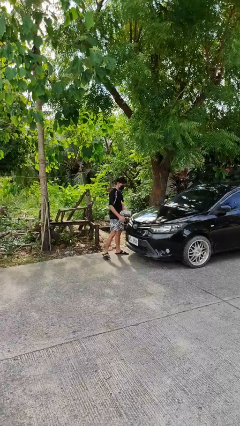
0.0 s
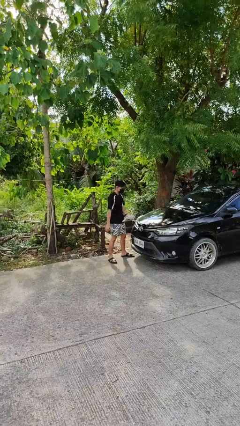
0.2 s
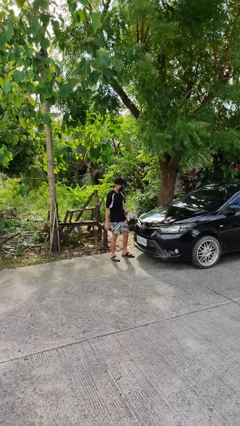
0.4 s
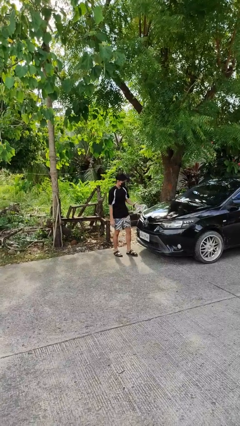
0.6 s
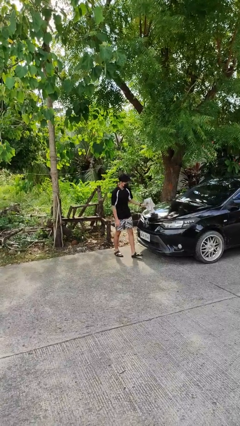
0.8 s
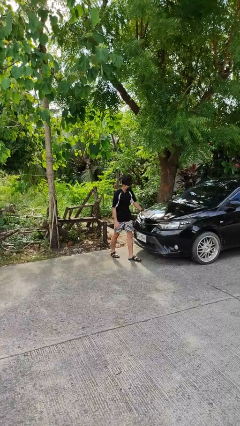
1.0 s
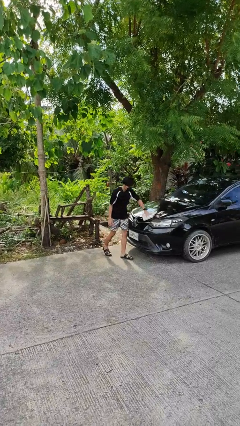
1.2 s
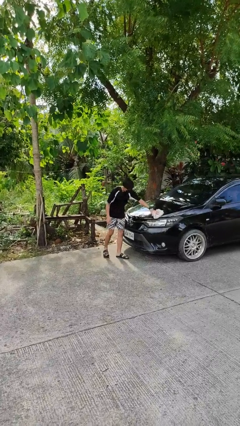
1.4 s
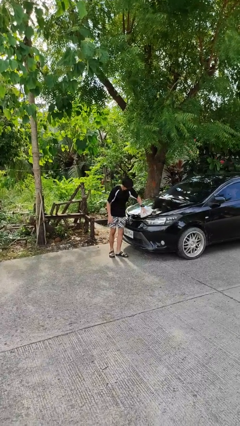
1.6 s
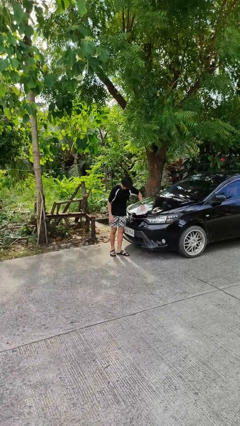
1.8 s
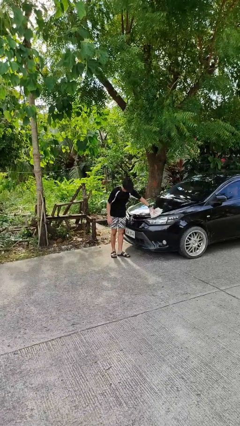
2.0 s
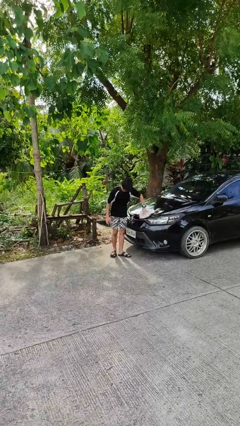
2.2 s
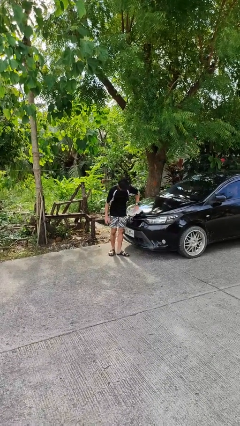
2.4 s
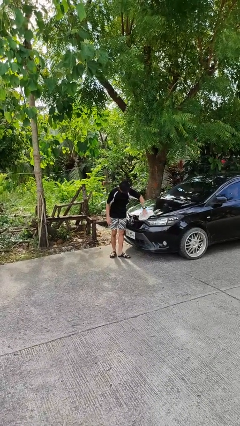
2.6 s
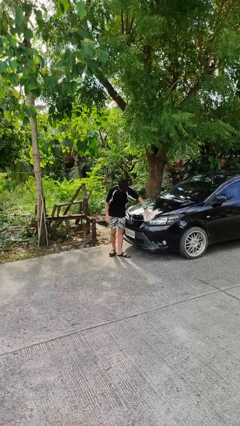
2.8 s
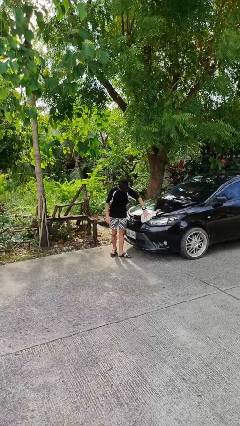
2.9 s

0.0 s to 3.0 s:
person polishes car with rag

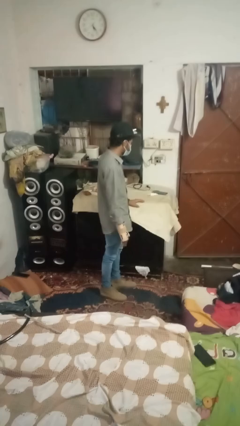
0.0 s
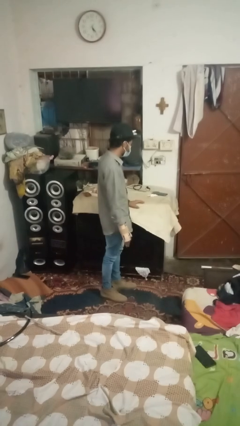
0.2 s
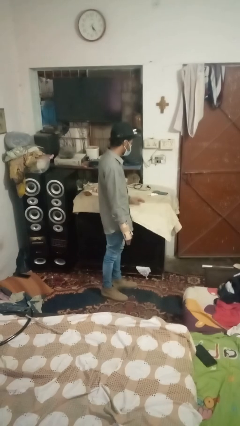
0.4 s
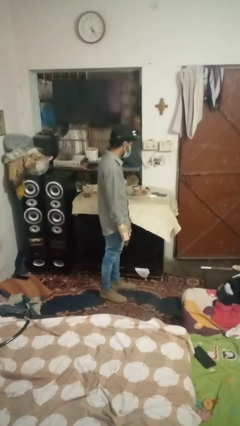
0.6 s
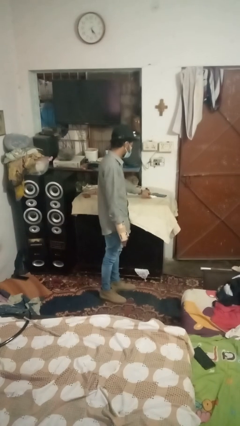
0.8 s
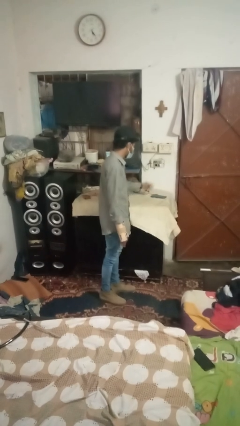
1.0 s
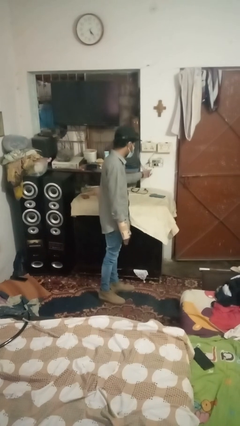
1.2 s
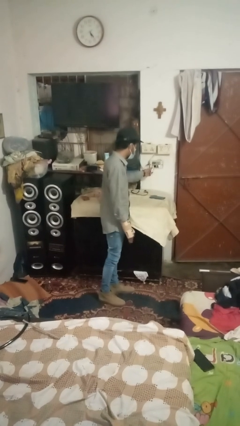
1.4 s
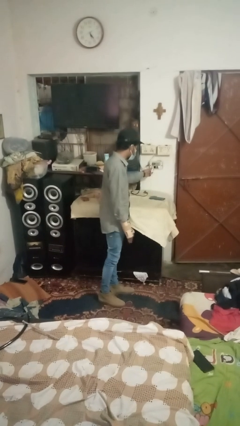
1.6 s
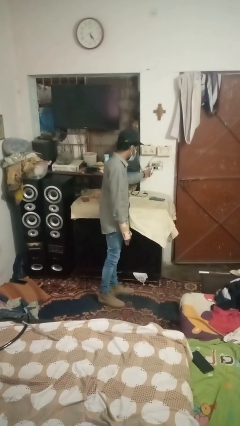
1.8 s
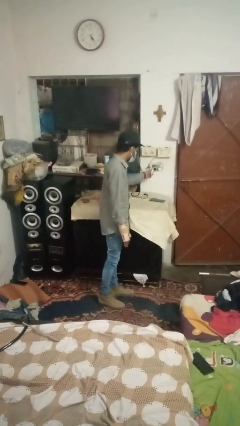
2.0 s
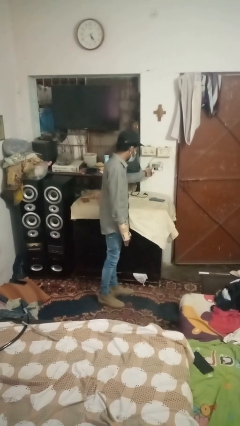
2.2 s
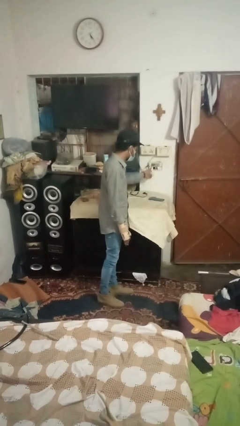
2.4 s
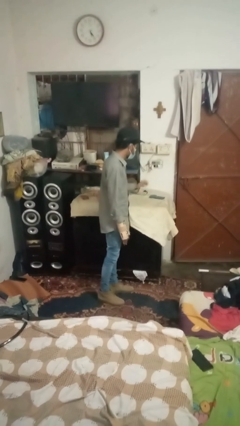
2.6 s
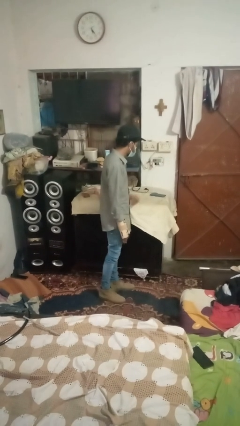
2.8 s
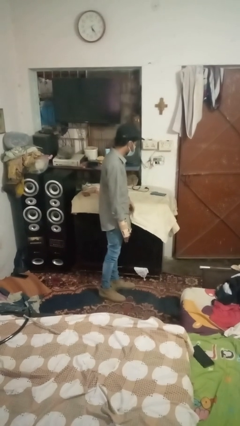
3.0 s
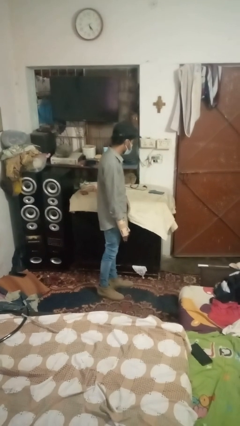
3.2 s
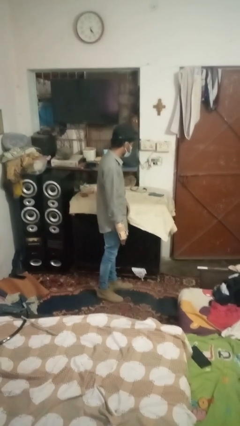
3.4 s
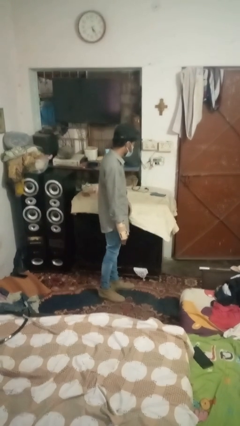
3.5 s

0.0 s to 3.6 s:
person plugs into electrical socket

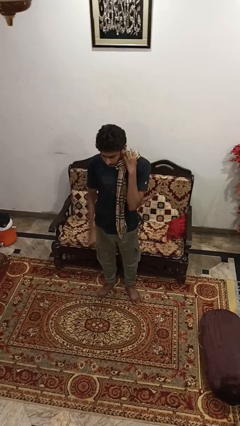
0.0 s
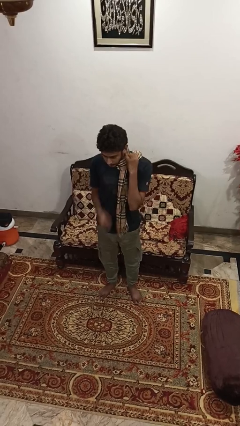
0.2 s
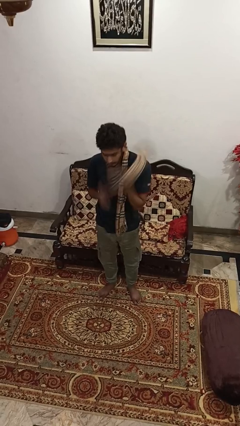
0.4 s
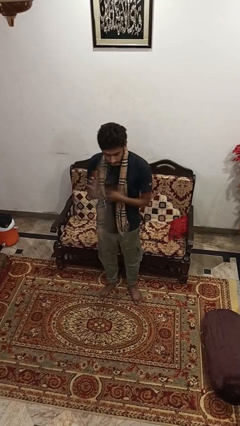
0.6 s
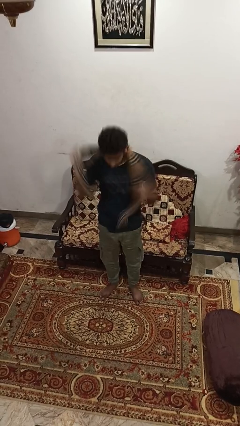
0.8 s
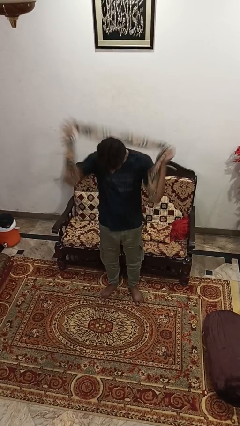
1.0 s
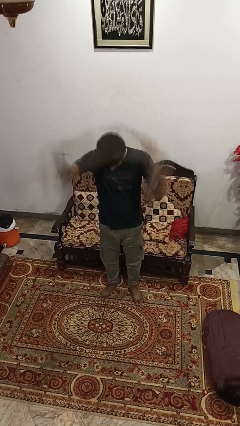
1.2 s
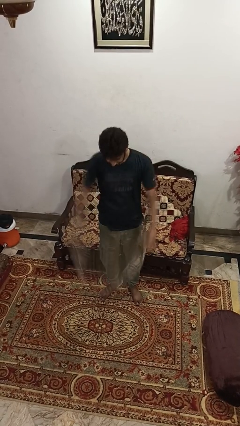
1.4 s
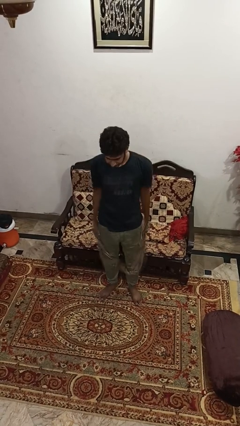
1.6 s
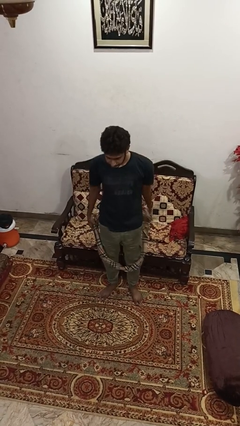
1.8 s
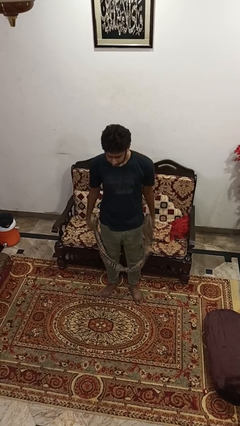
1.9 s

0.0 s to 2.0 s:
person takes off scarf

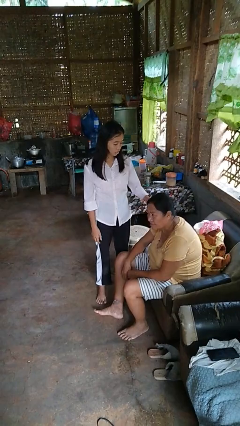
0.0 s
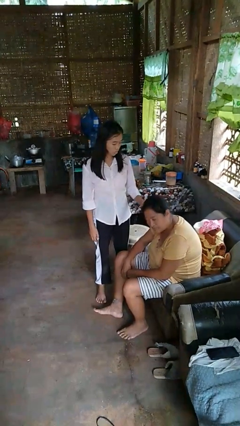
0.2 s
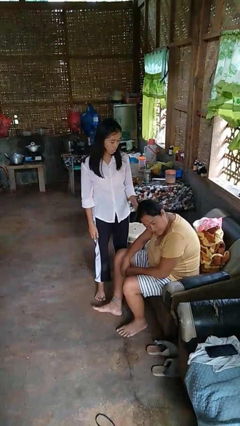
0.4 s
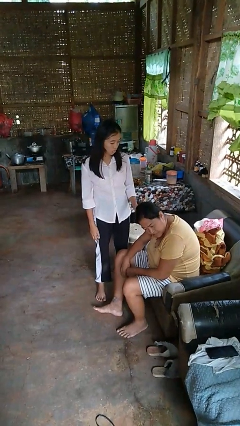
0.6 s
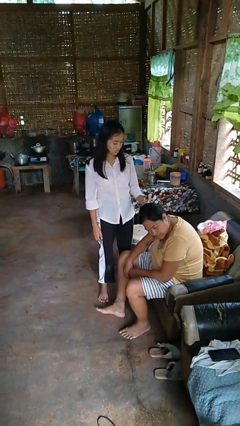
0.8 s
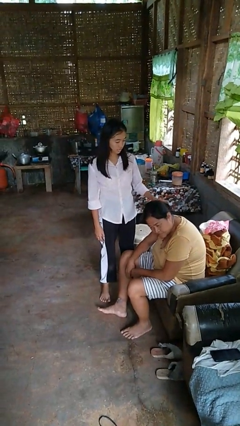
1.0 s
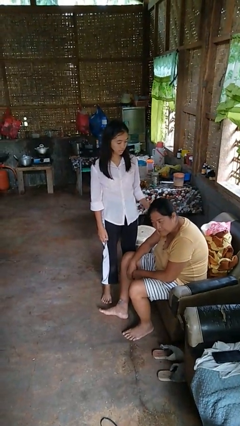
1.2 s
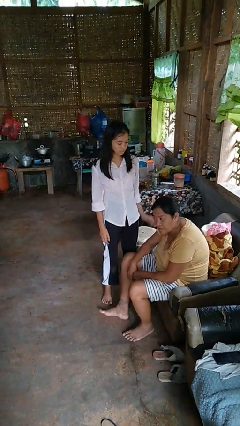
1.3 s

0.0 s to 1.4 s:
person grabs person by hair

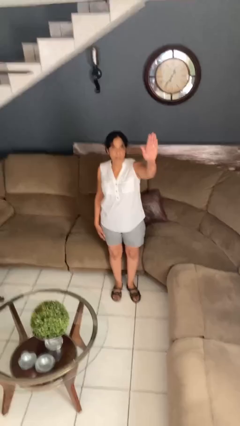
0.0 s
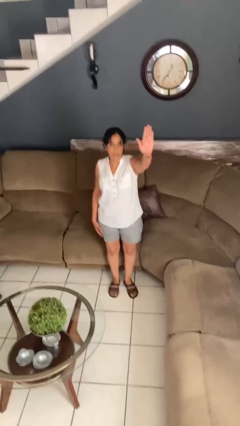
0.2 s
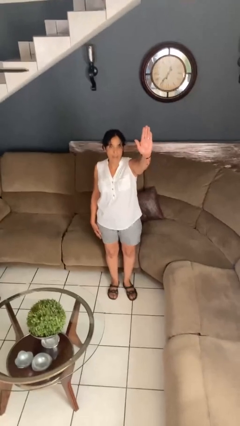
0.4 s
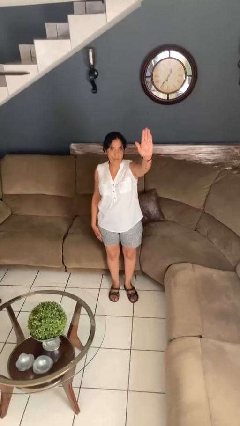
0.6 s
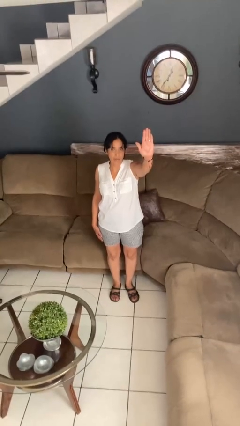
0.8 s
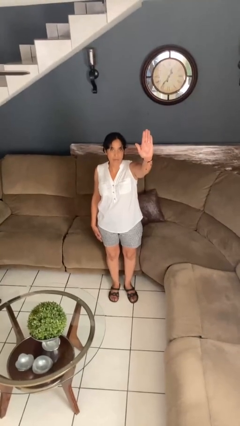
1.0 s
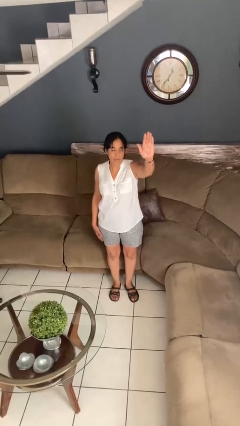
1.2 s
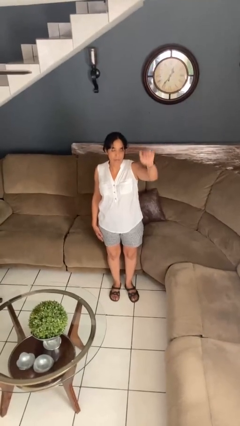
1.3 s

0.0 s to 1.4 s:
person gestures stop

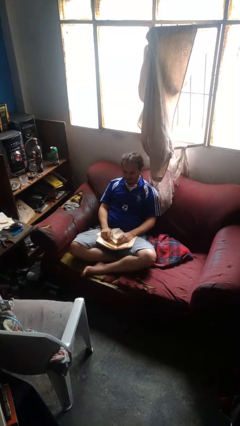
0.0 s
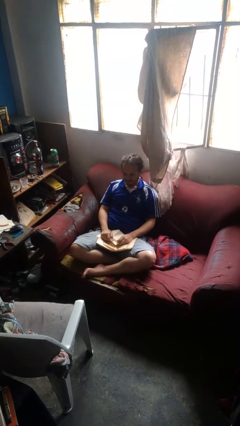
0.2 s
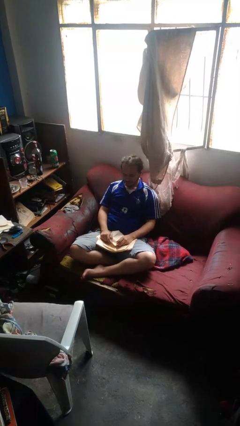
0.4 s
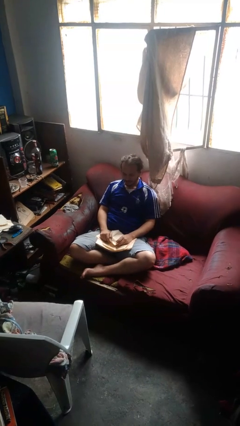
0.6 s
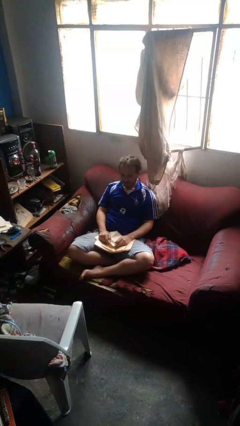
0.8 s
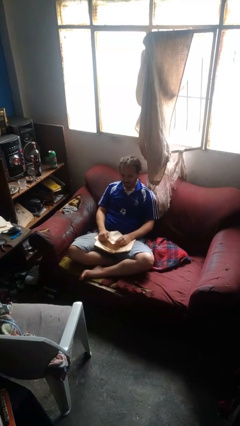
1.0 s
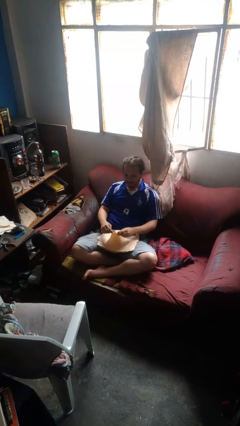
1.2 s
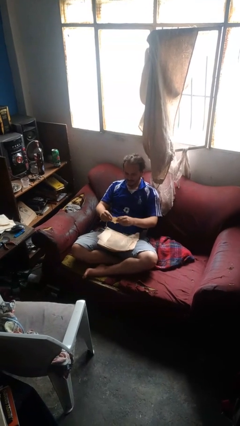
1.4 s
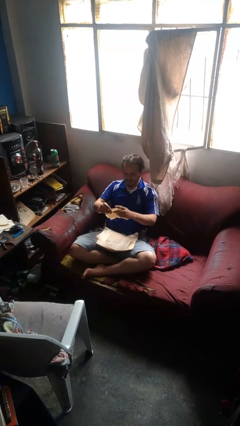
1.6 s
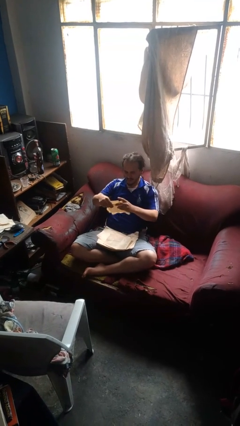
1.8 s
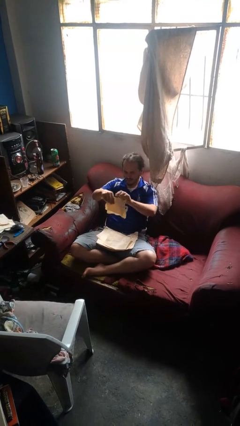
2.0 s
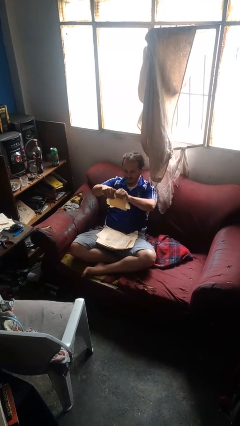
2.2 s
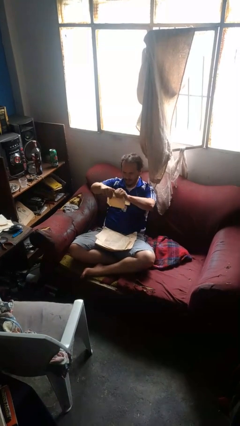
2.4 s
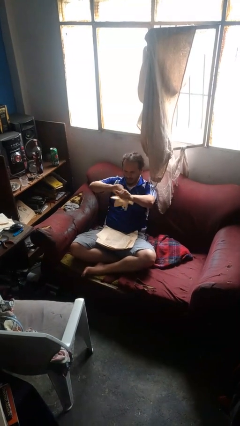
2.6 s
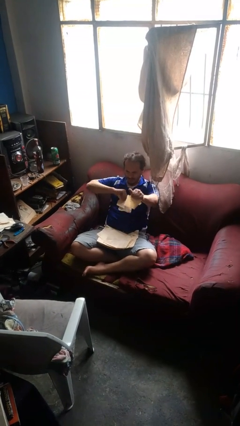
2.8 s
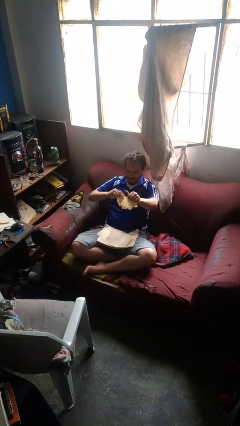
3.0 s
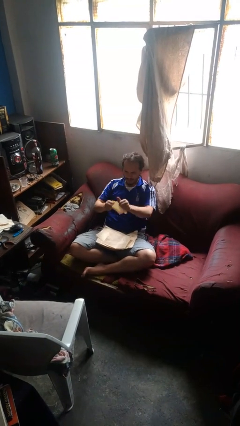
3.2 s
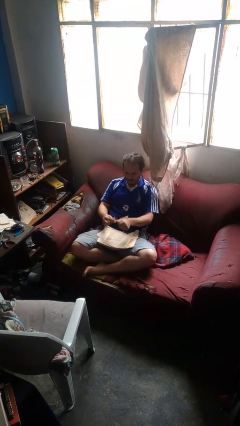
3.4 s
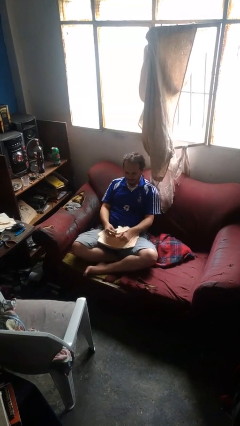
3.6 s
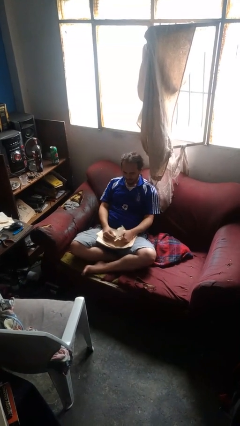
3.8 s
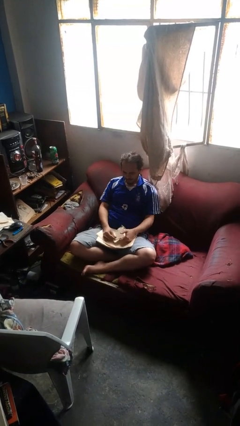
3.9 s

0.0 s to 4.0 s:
person tears paper

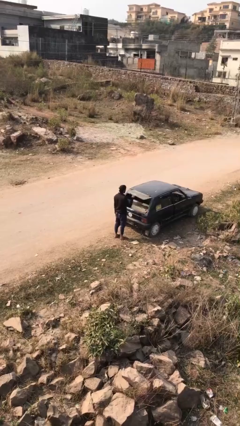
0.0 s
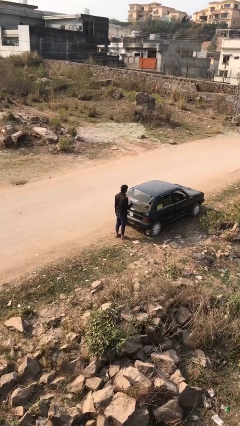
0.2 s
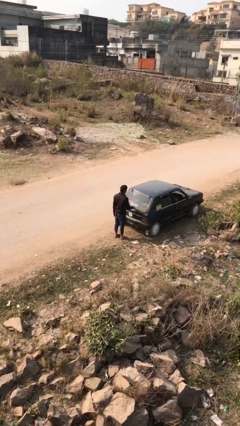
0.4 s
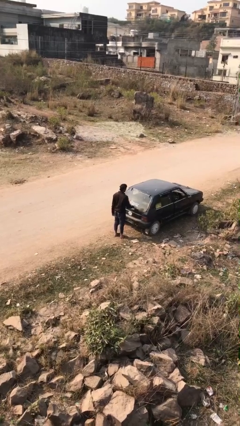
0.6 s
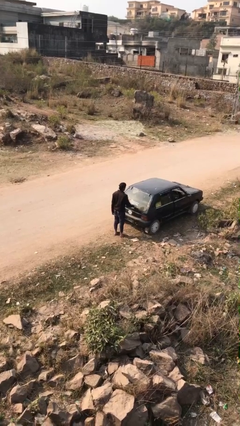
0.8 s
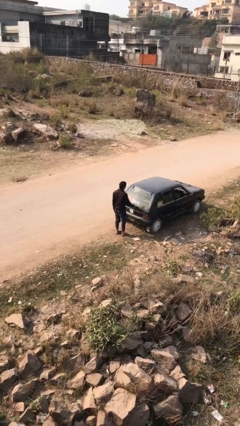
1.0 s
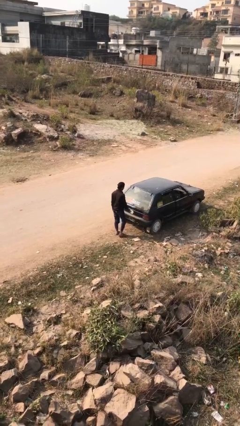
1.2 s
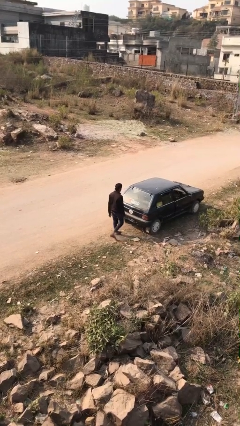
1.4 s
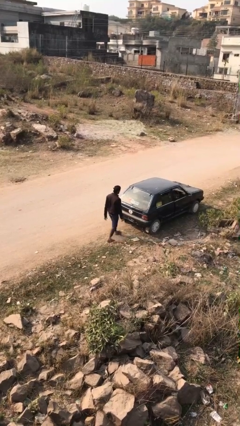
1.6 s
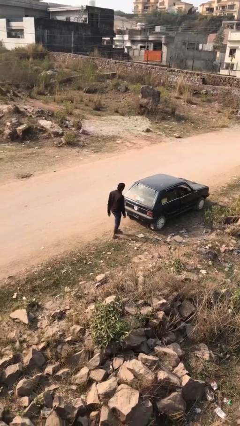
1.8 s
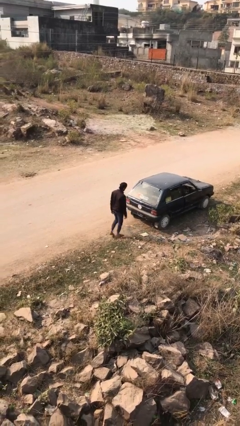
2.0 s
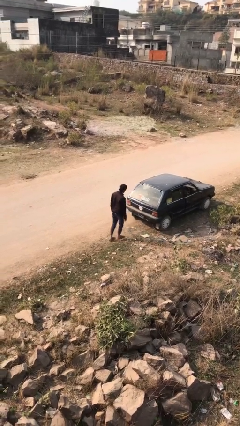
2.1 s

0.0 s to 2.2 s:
person closes car trunk
